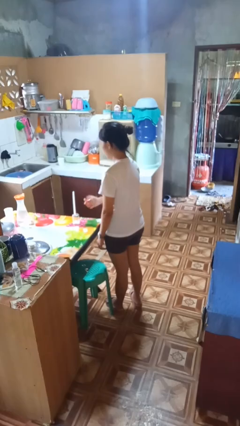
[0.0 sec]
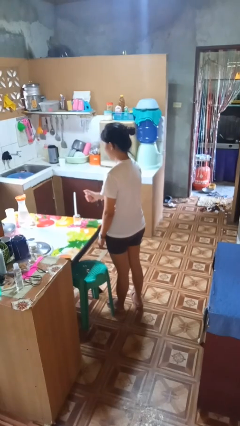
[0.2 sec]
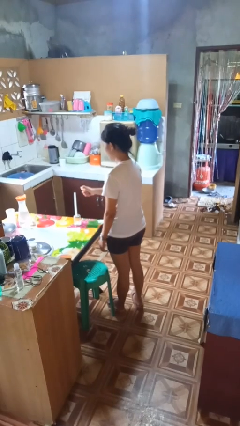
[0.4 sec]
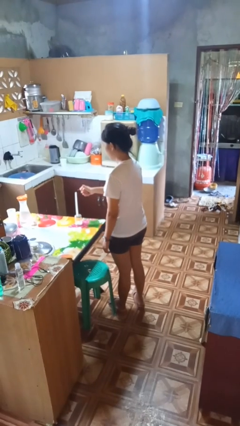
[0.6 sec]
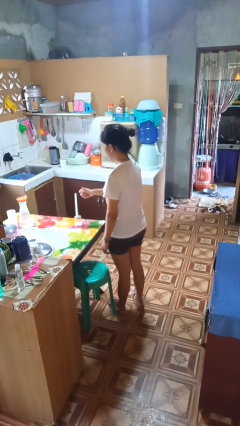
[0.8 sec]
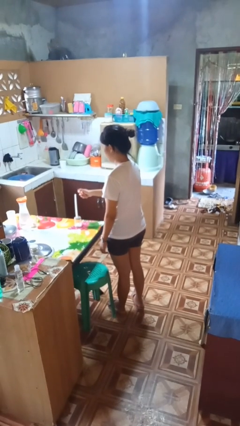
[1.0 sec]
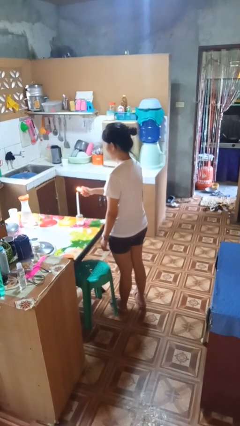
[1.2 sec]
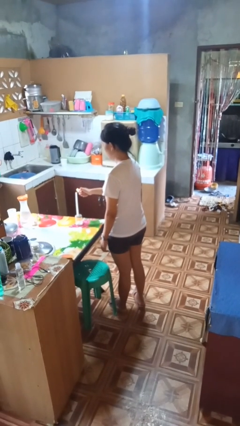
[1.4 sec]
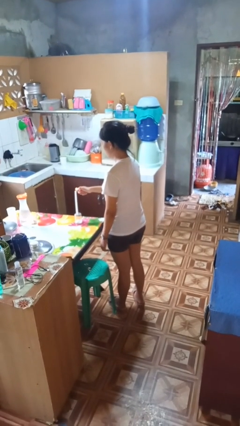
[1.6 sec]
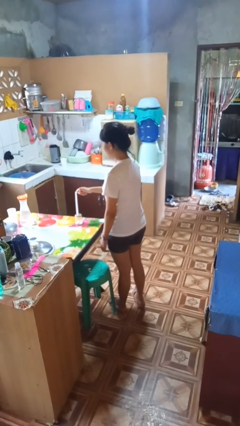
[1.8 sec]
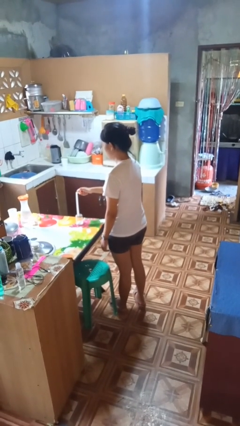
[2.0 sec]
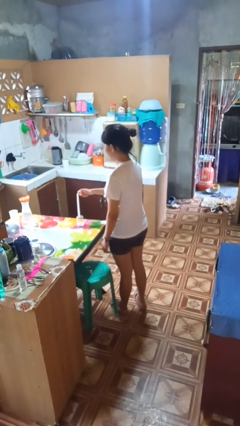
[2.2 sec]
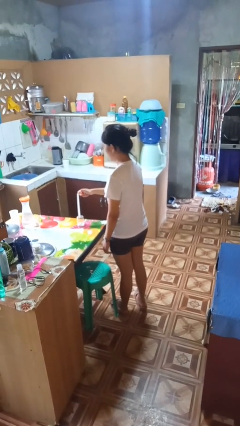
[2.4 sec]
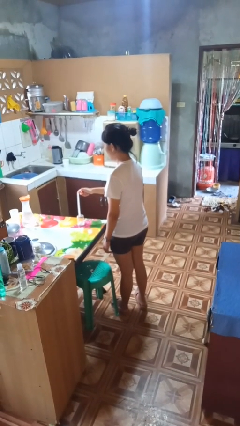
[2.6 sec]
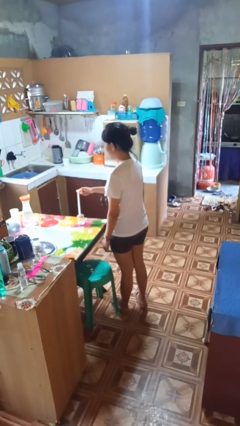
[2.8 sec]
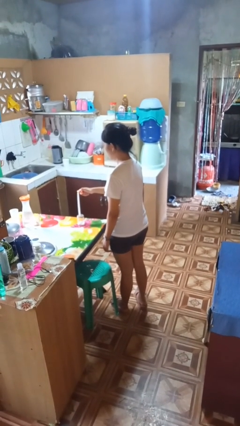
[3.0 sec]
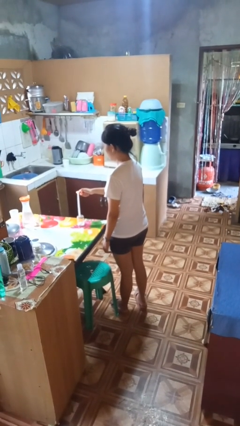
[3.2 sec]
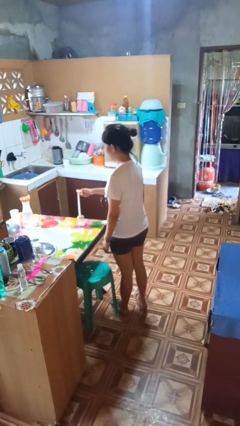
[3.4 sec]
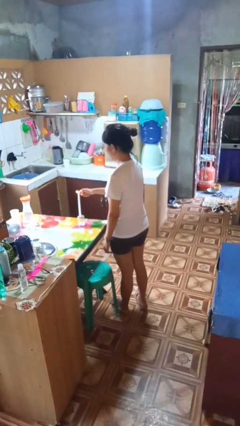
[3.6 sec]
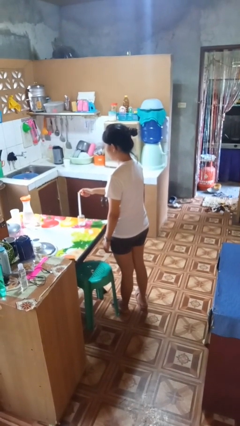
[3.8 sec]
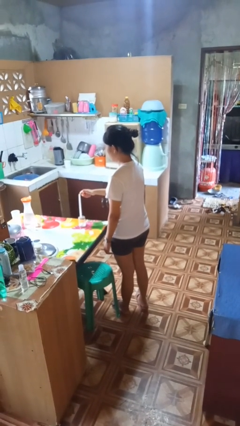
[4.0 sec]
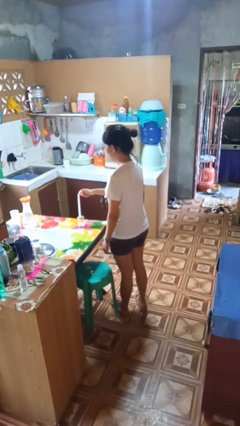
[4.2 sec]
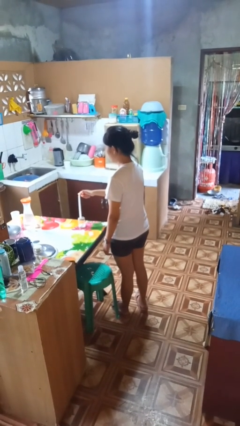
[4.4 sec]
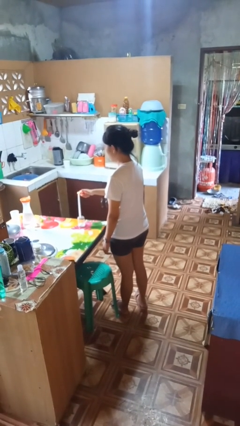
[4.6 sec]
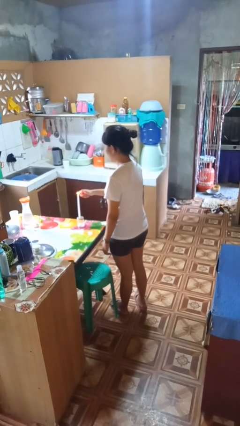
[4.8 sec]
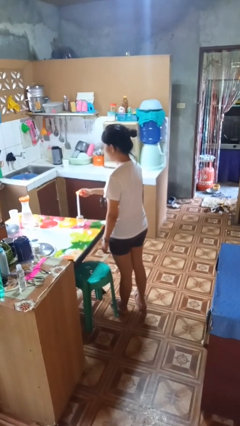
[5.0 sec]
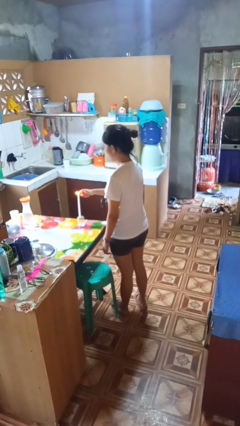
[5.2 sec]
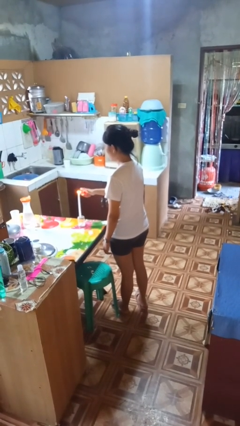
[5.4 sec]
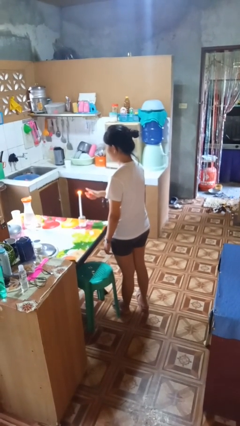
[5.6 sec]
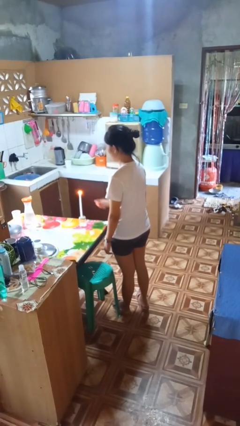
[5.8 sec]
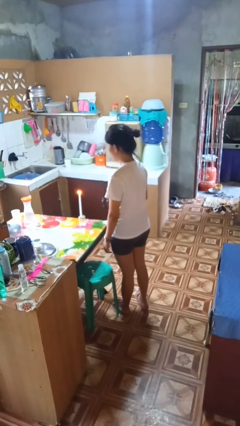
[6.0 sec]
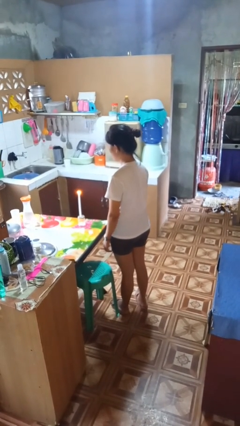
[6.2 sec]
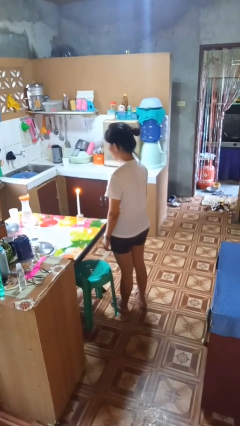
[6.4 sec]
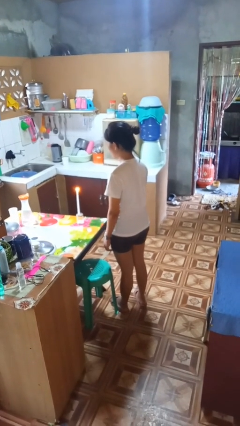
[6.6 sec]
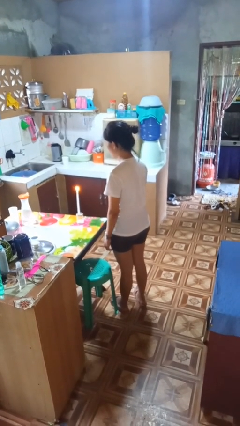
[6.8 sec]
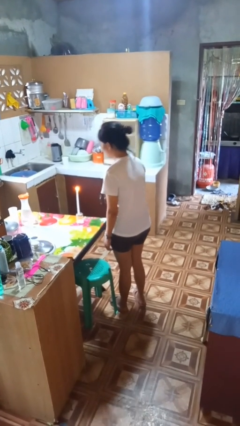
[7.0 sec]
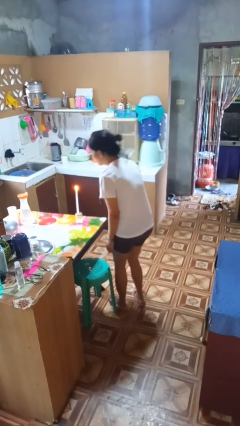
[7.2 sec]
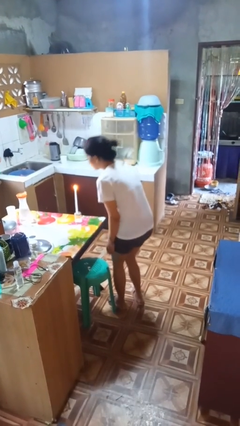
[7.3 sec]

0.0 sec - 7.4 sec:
person lights candle

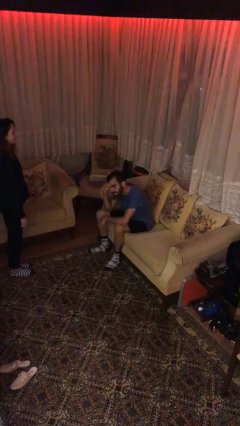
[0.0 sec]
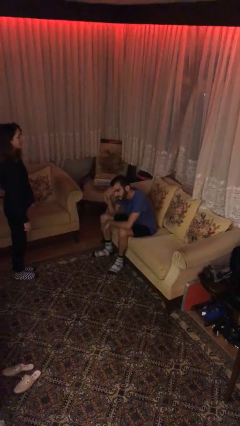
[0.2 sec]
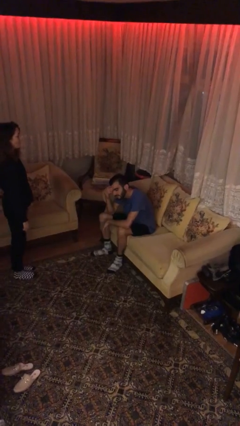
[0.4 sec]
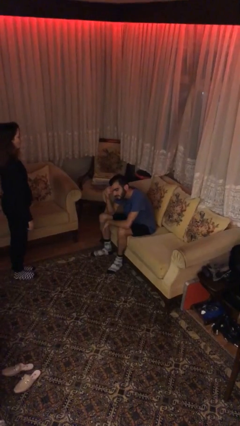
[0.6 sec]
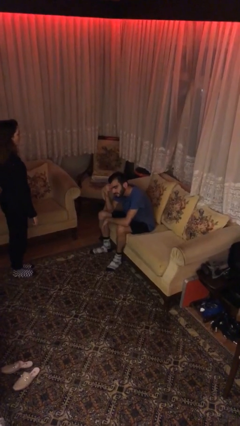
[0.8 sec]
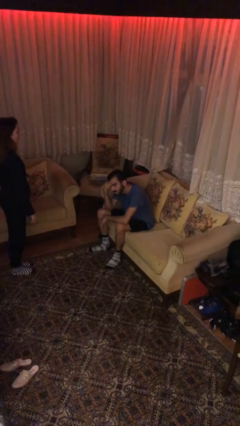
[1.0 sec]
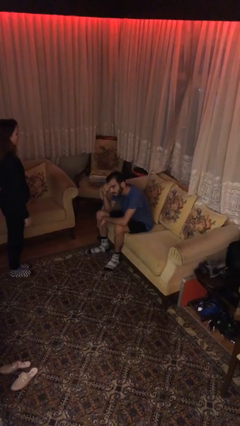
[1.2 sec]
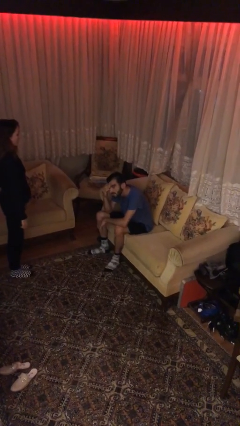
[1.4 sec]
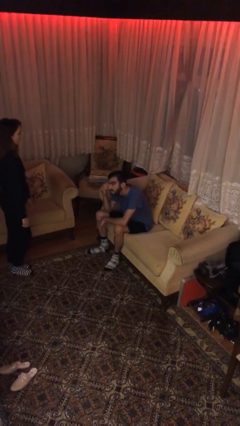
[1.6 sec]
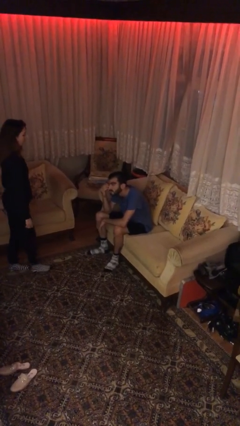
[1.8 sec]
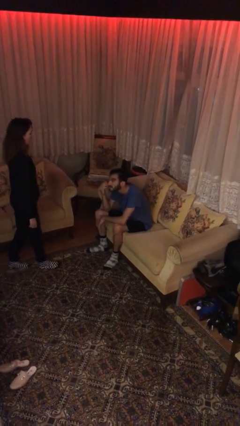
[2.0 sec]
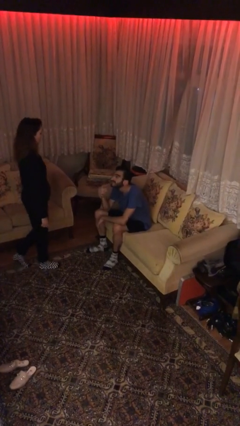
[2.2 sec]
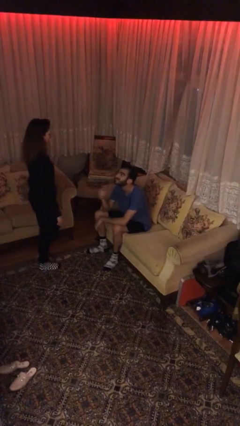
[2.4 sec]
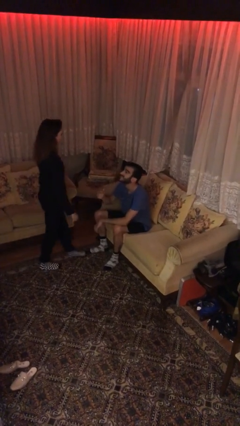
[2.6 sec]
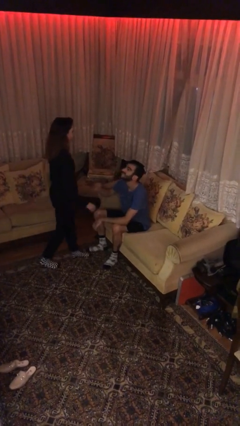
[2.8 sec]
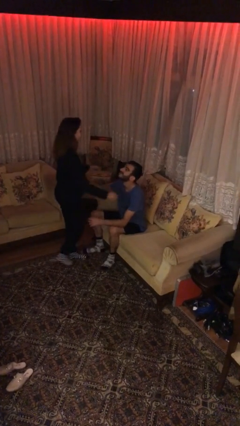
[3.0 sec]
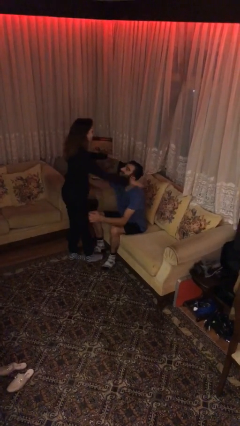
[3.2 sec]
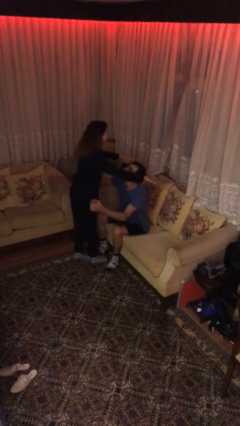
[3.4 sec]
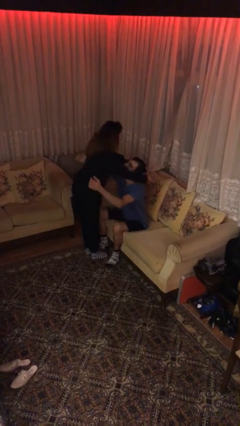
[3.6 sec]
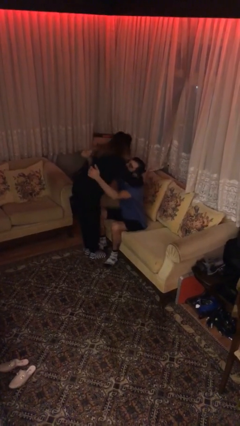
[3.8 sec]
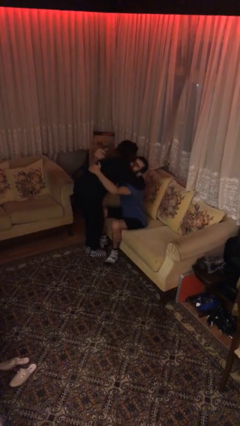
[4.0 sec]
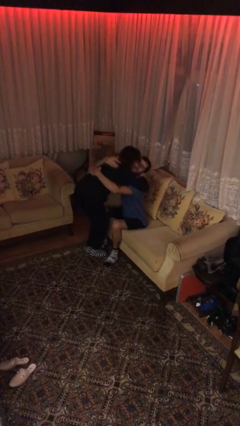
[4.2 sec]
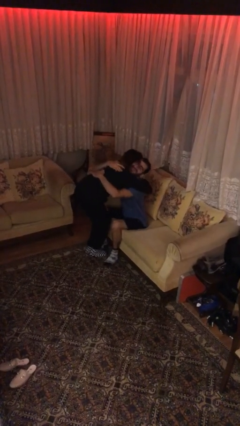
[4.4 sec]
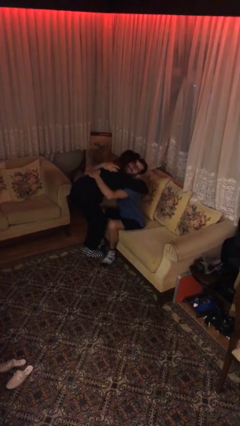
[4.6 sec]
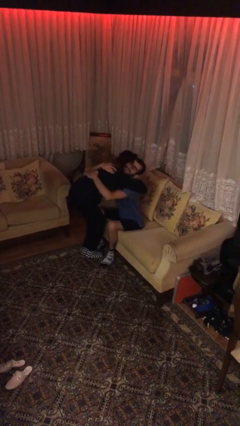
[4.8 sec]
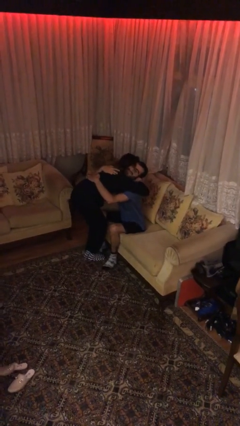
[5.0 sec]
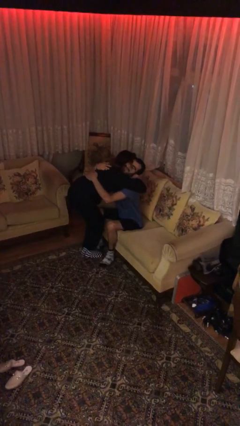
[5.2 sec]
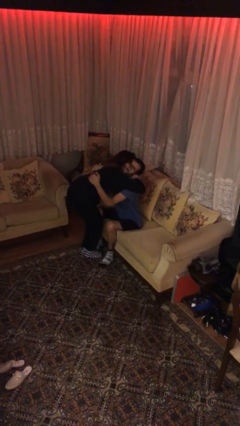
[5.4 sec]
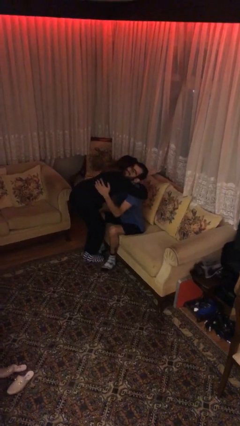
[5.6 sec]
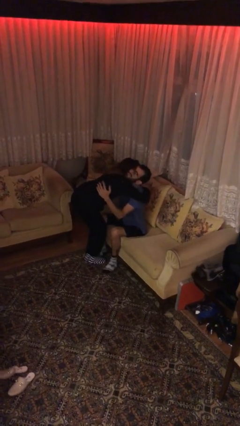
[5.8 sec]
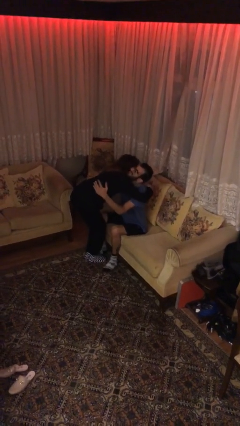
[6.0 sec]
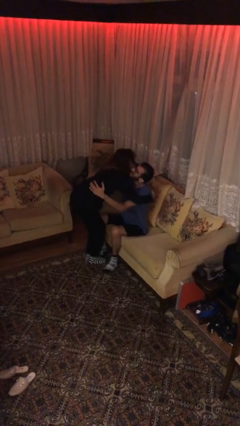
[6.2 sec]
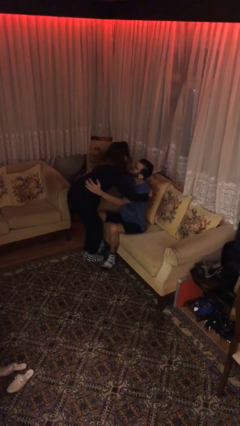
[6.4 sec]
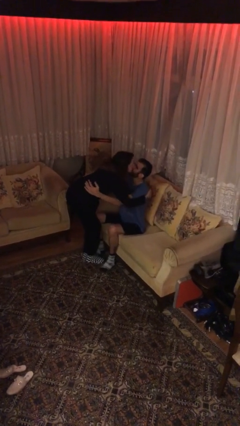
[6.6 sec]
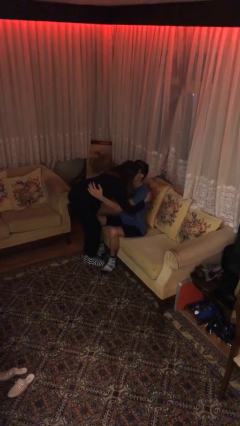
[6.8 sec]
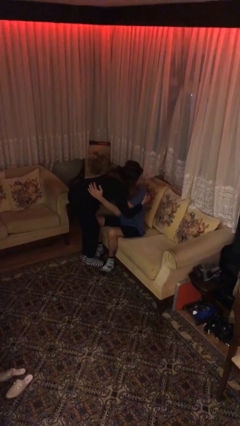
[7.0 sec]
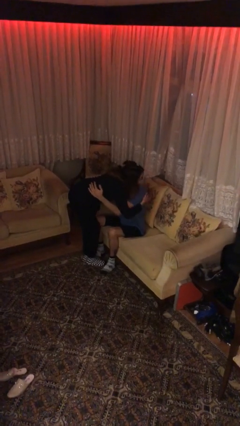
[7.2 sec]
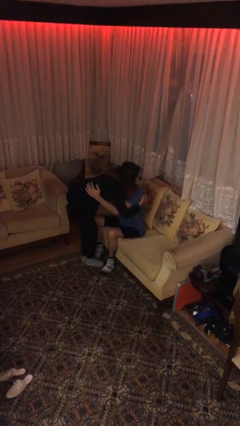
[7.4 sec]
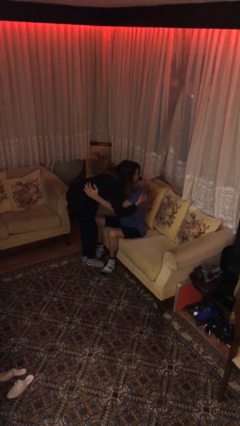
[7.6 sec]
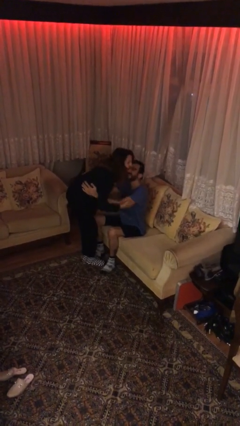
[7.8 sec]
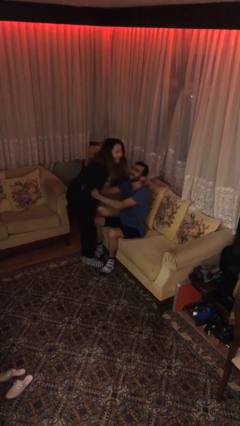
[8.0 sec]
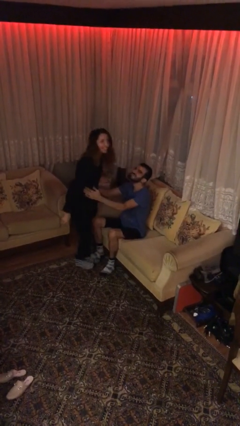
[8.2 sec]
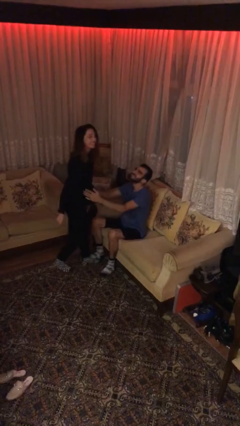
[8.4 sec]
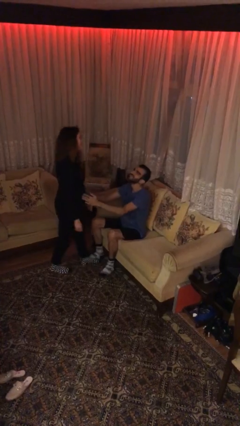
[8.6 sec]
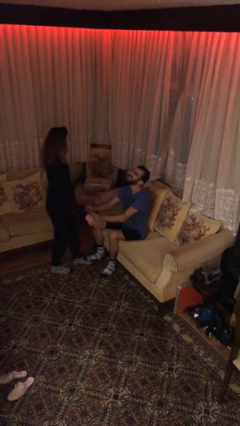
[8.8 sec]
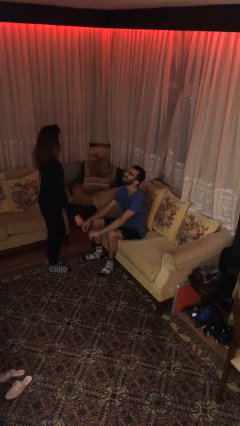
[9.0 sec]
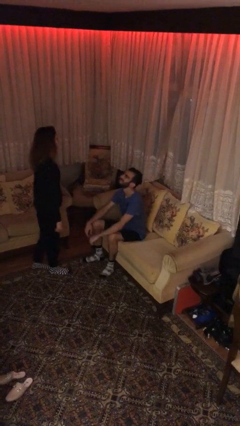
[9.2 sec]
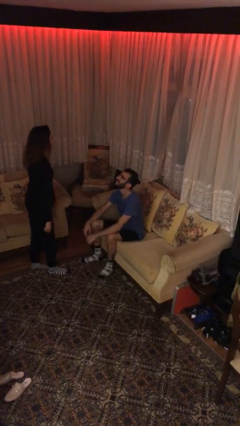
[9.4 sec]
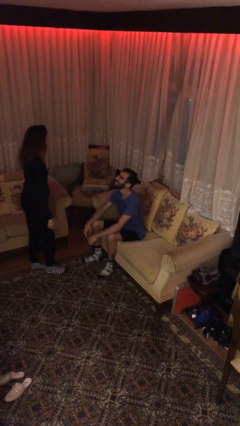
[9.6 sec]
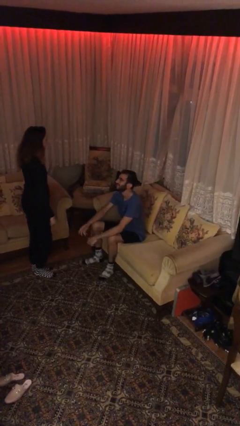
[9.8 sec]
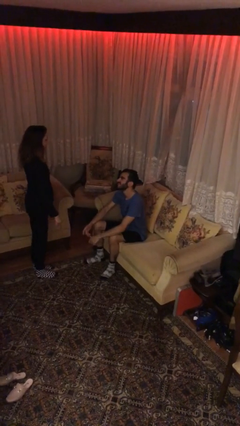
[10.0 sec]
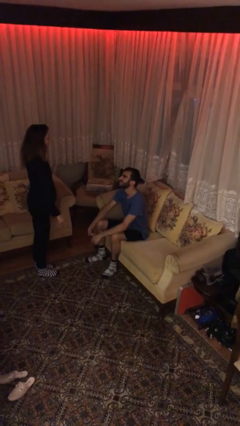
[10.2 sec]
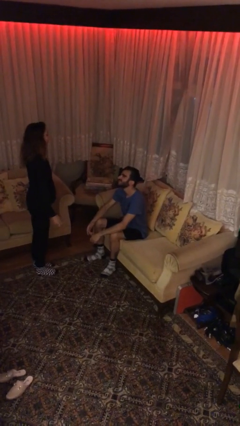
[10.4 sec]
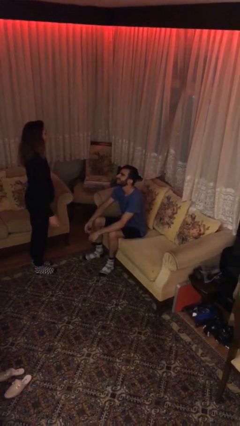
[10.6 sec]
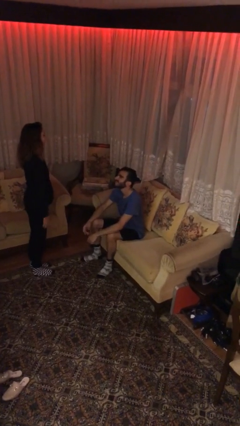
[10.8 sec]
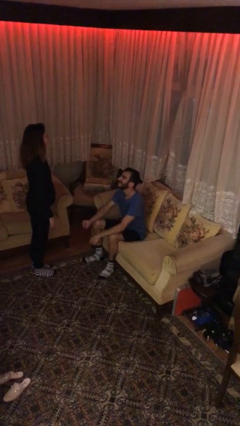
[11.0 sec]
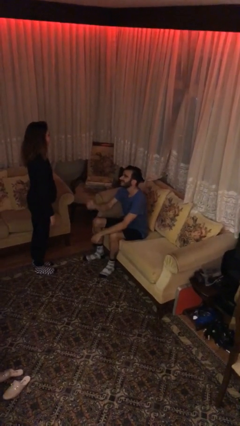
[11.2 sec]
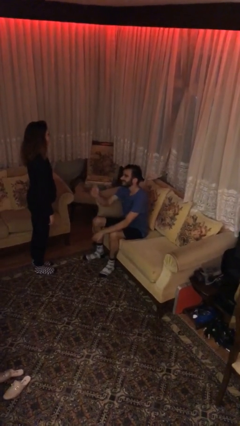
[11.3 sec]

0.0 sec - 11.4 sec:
person embraces person
